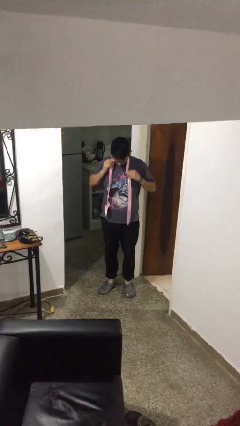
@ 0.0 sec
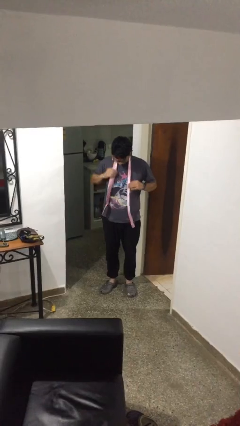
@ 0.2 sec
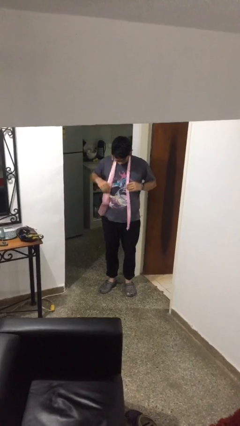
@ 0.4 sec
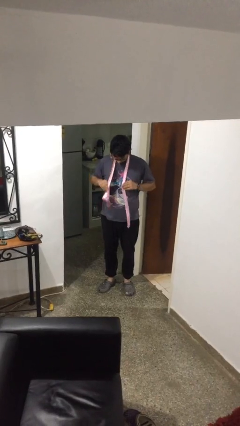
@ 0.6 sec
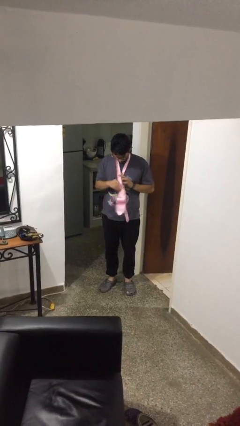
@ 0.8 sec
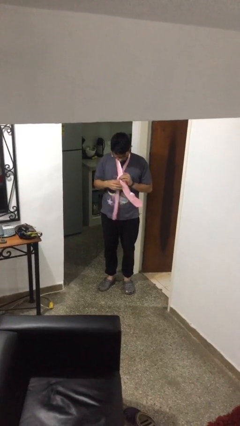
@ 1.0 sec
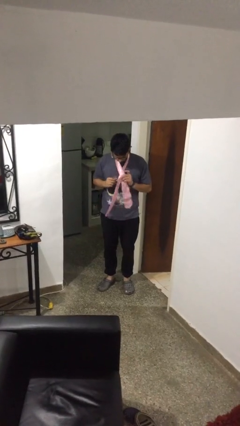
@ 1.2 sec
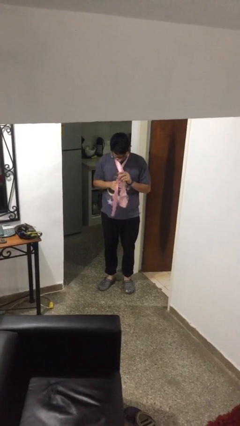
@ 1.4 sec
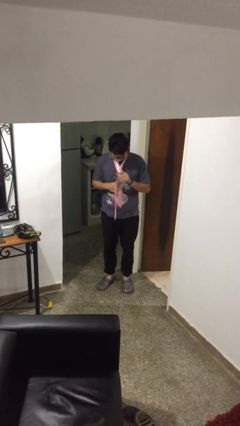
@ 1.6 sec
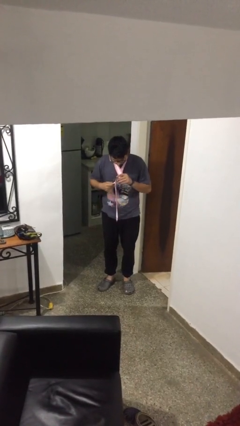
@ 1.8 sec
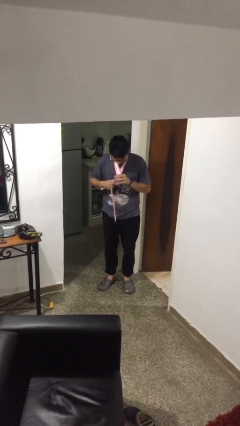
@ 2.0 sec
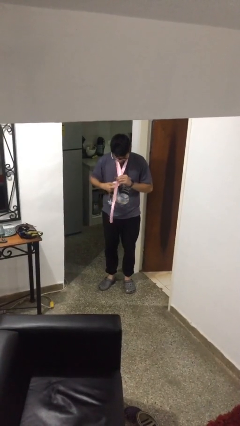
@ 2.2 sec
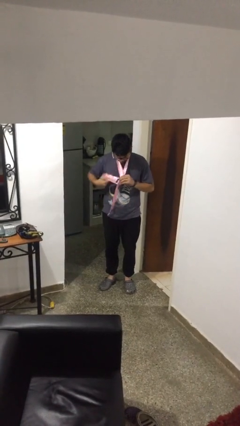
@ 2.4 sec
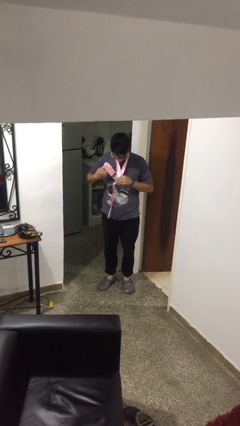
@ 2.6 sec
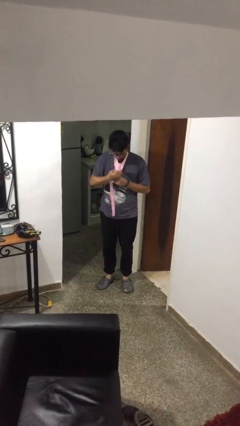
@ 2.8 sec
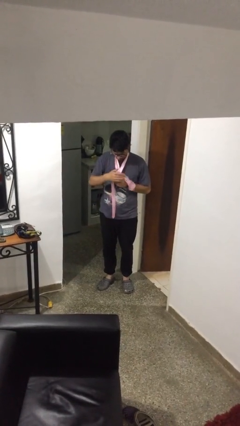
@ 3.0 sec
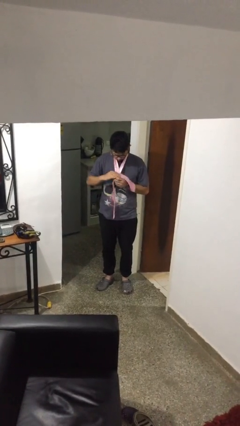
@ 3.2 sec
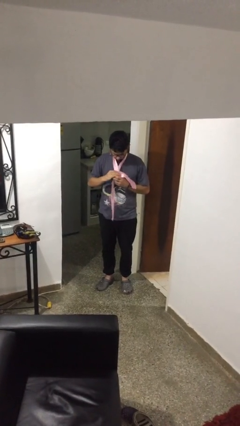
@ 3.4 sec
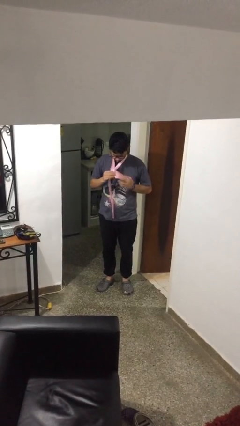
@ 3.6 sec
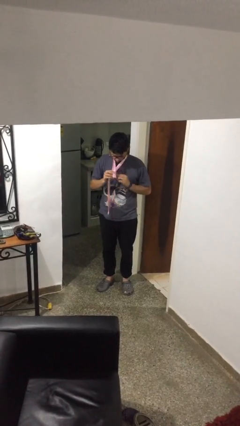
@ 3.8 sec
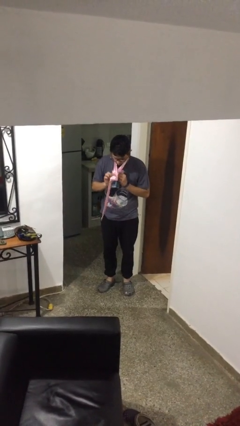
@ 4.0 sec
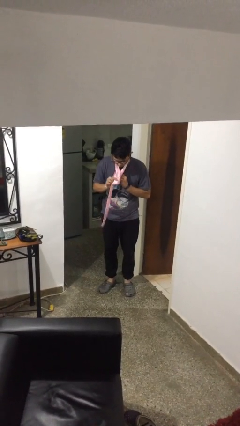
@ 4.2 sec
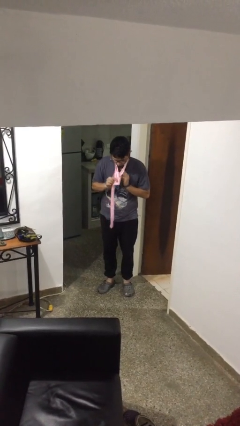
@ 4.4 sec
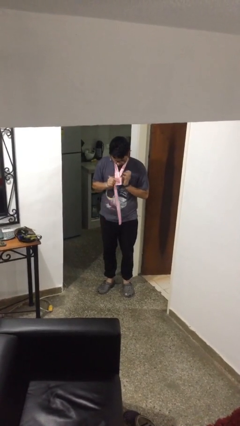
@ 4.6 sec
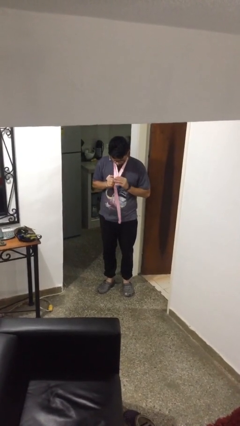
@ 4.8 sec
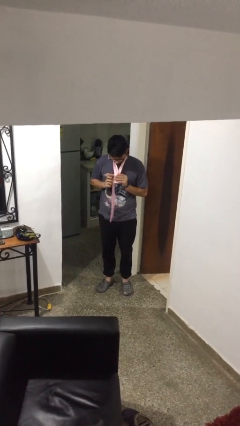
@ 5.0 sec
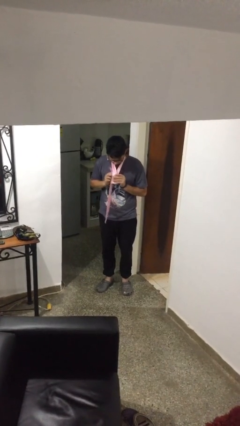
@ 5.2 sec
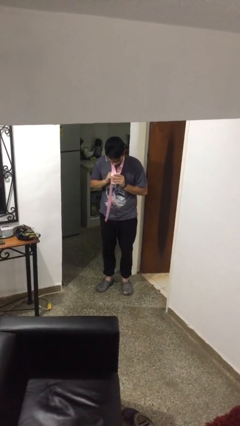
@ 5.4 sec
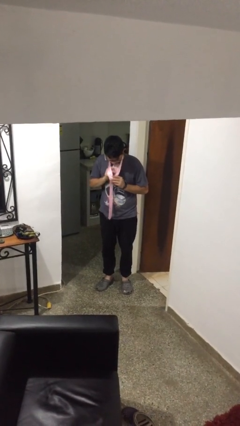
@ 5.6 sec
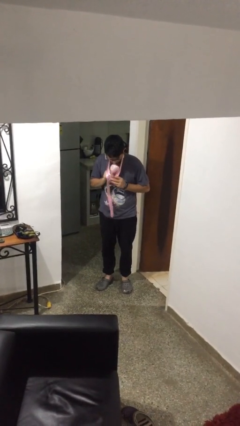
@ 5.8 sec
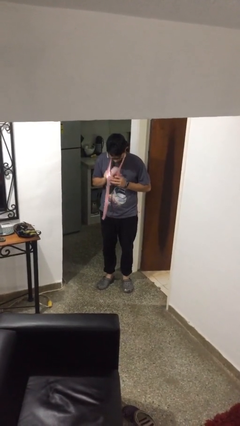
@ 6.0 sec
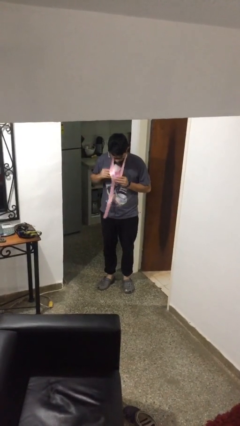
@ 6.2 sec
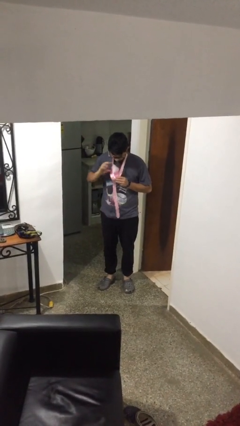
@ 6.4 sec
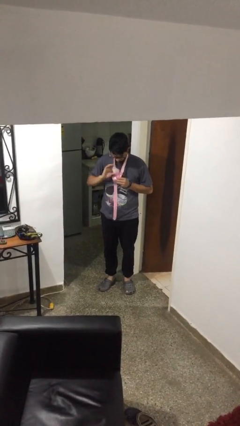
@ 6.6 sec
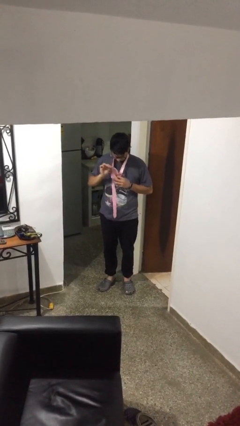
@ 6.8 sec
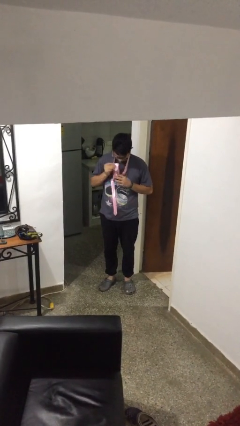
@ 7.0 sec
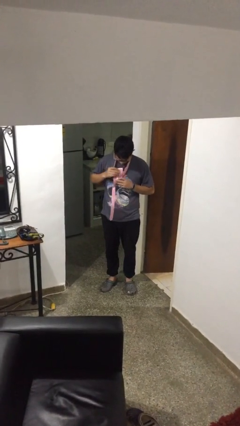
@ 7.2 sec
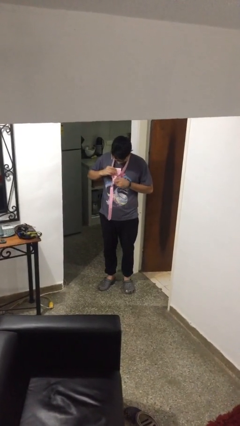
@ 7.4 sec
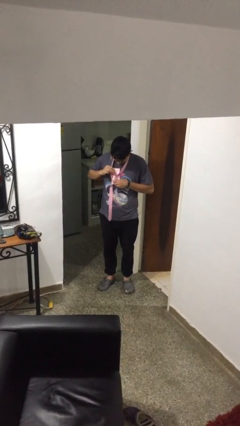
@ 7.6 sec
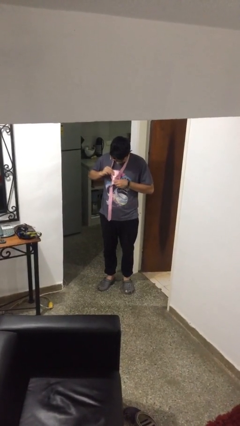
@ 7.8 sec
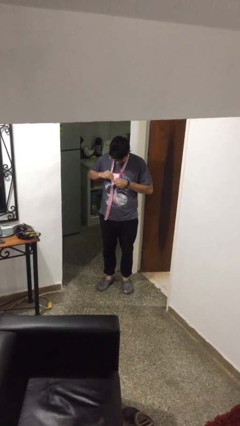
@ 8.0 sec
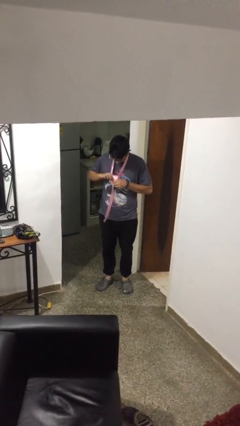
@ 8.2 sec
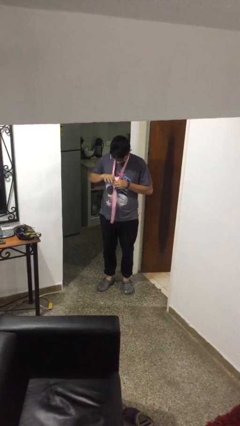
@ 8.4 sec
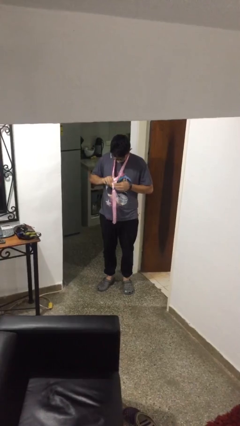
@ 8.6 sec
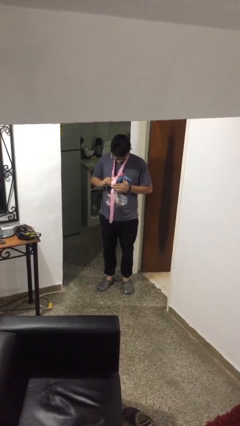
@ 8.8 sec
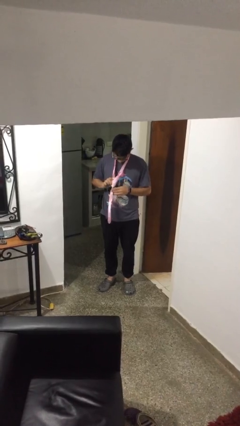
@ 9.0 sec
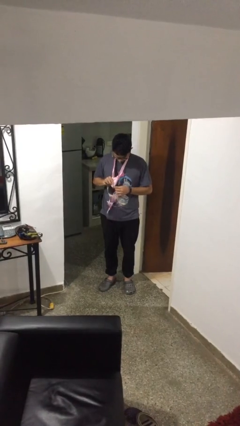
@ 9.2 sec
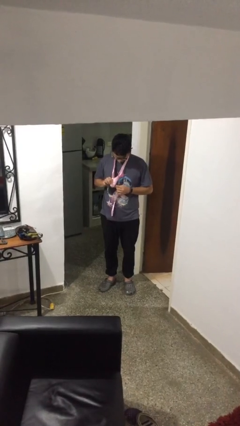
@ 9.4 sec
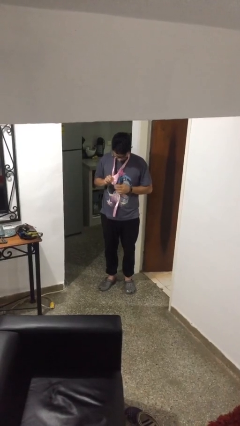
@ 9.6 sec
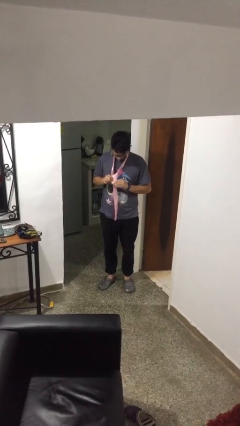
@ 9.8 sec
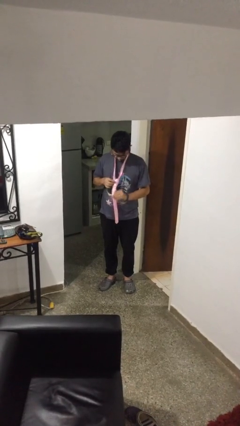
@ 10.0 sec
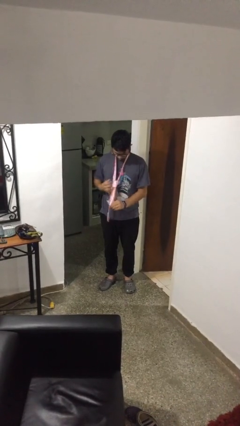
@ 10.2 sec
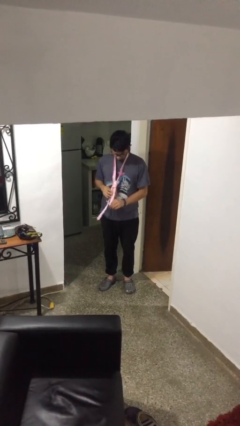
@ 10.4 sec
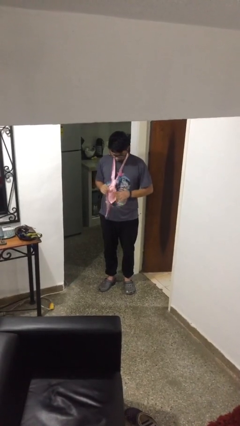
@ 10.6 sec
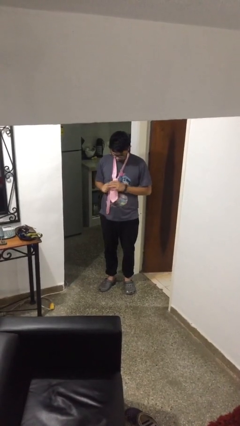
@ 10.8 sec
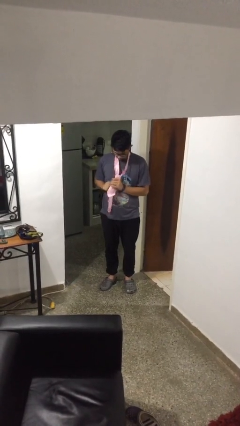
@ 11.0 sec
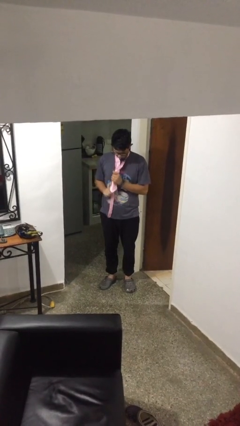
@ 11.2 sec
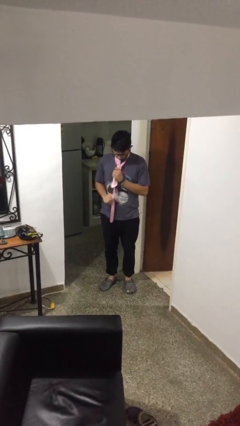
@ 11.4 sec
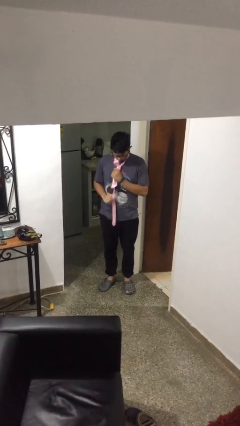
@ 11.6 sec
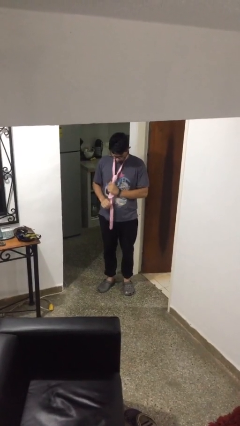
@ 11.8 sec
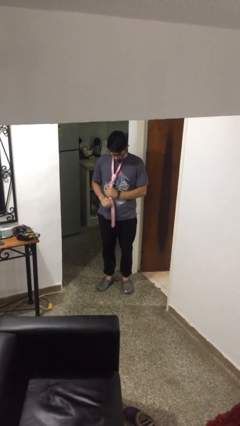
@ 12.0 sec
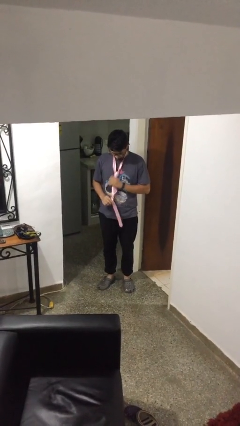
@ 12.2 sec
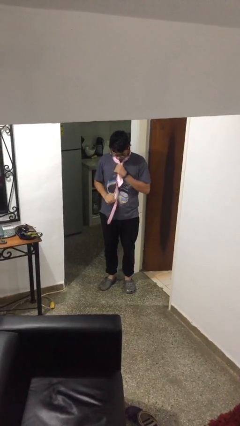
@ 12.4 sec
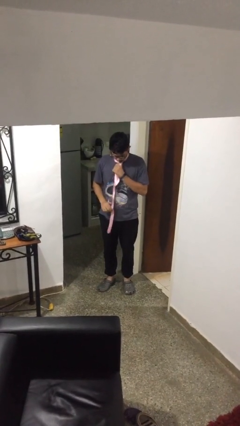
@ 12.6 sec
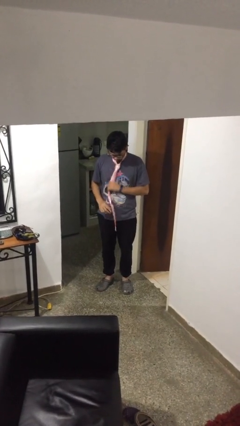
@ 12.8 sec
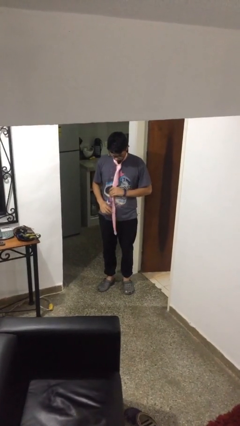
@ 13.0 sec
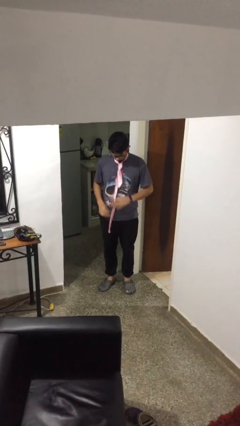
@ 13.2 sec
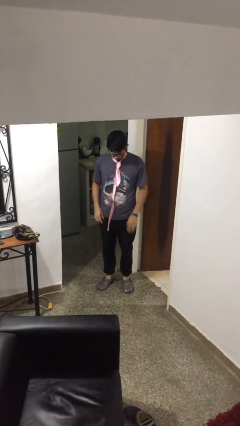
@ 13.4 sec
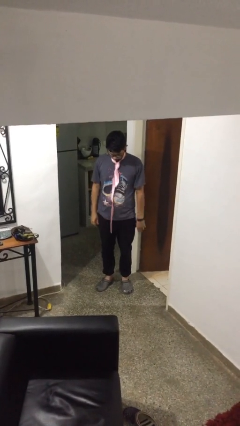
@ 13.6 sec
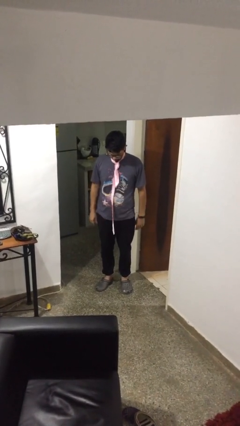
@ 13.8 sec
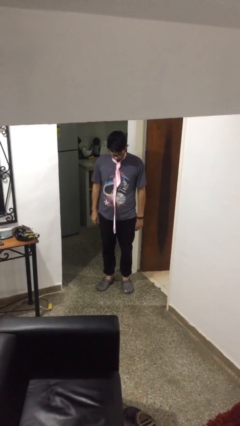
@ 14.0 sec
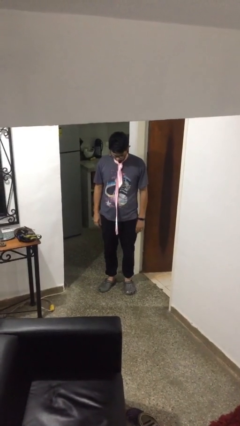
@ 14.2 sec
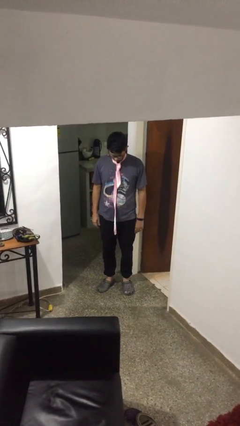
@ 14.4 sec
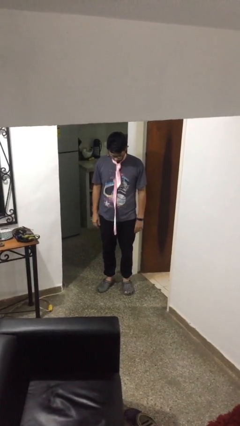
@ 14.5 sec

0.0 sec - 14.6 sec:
person puts on necktie

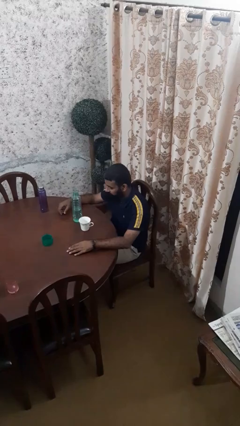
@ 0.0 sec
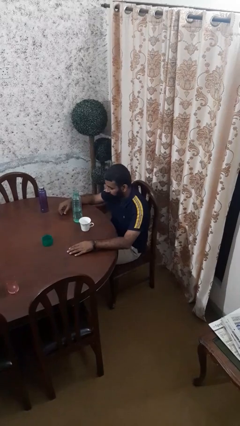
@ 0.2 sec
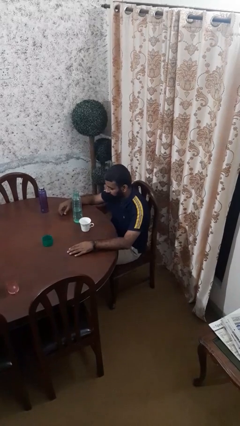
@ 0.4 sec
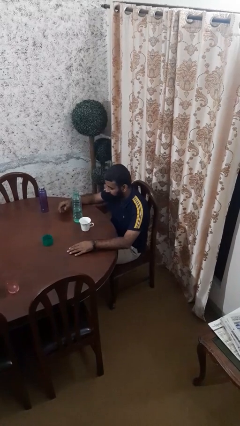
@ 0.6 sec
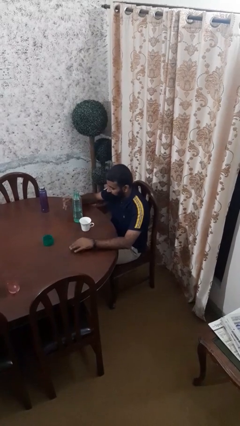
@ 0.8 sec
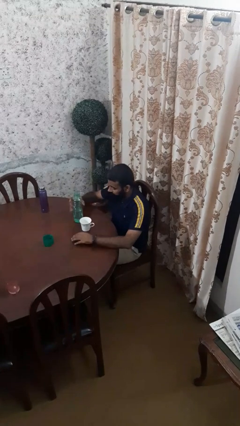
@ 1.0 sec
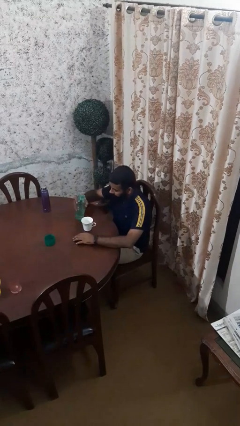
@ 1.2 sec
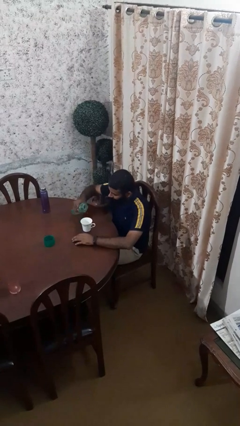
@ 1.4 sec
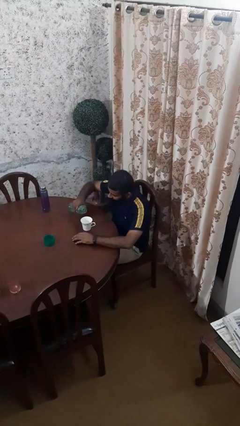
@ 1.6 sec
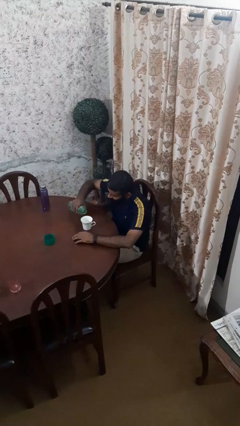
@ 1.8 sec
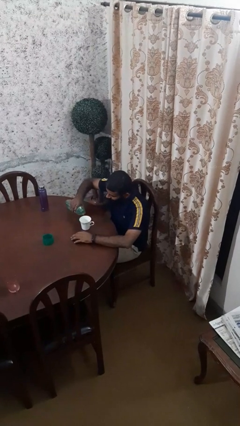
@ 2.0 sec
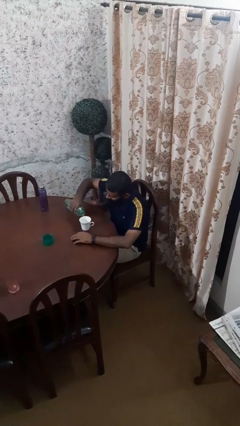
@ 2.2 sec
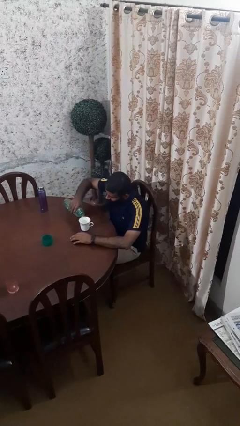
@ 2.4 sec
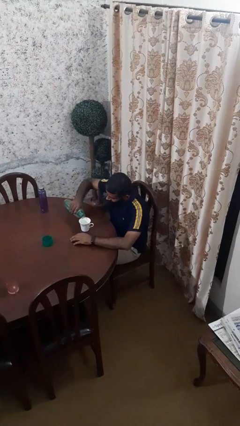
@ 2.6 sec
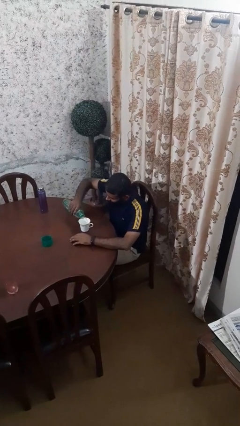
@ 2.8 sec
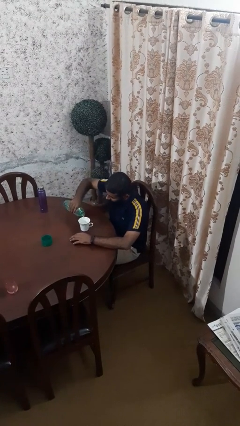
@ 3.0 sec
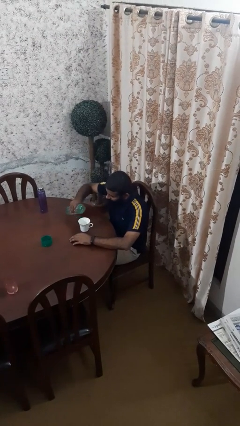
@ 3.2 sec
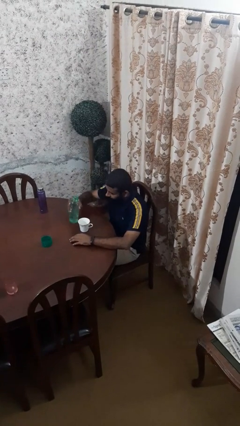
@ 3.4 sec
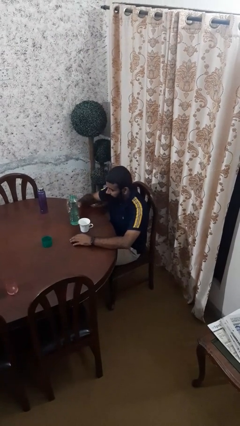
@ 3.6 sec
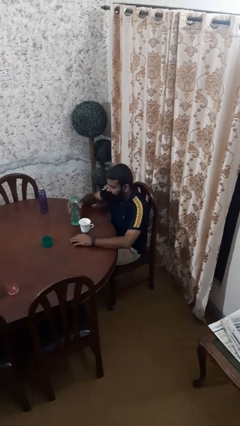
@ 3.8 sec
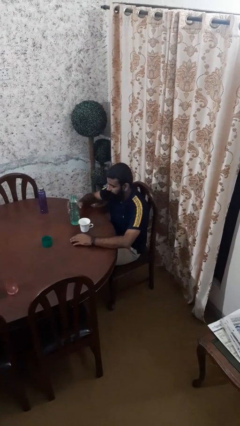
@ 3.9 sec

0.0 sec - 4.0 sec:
person pours liquid into cup
